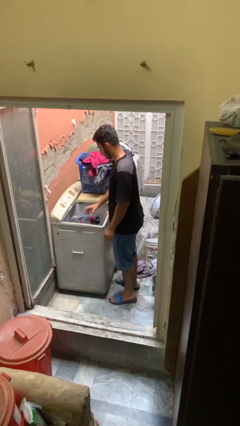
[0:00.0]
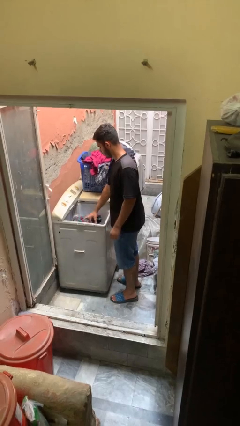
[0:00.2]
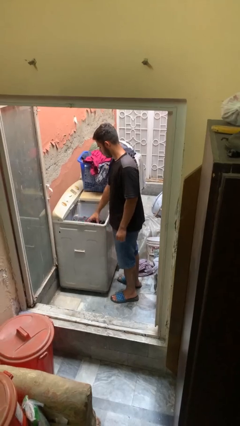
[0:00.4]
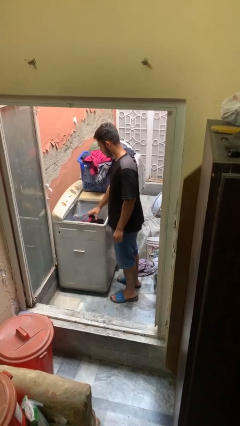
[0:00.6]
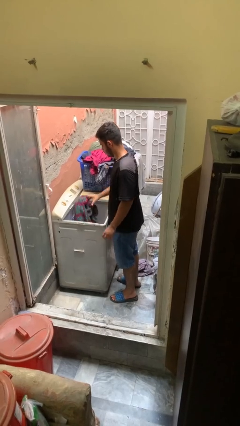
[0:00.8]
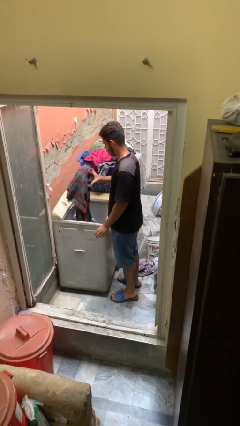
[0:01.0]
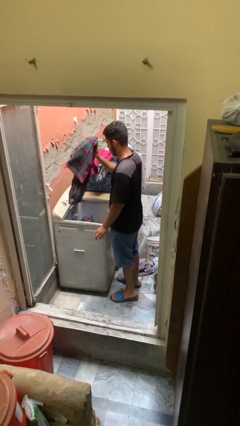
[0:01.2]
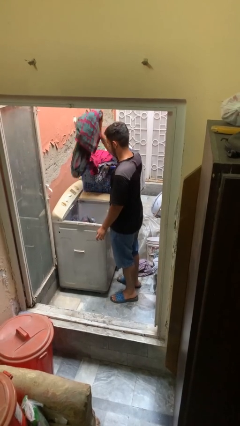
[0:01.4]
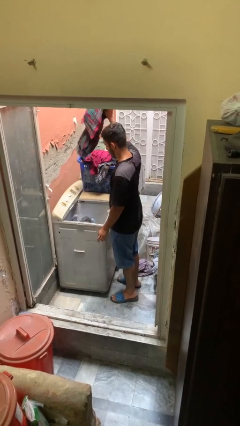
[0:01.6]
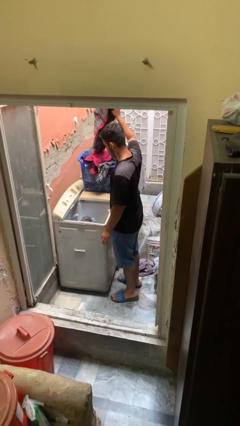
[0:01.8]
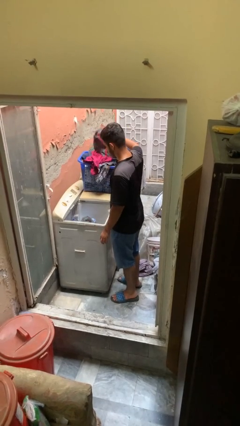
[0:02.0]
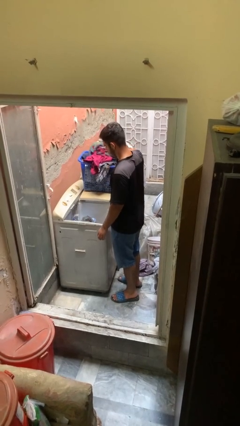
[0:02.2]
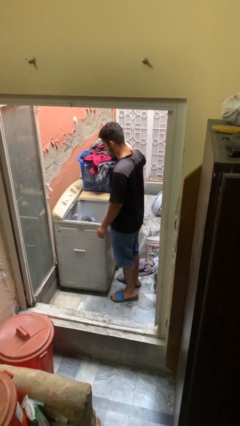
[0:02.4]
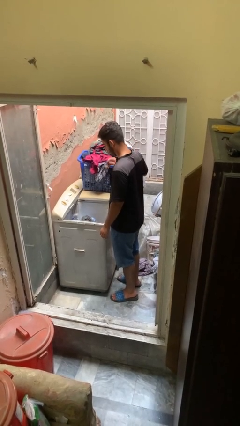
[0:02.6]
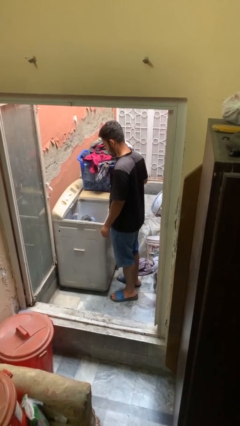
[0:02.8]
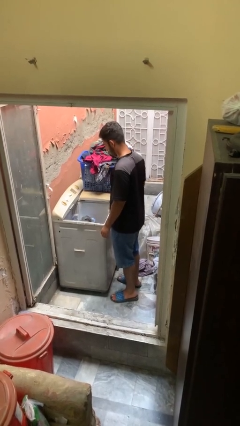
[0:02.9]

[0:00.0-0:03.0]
person loads clotheswasher

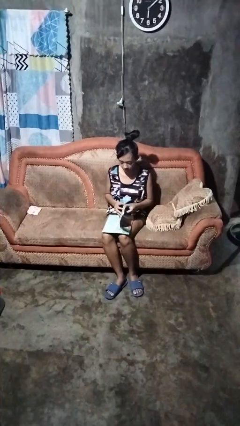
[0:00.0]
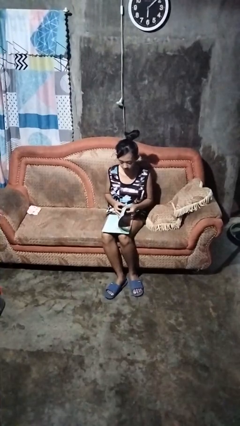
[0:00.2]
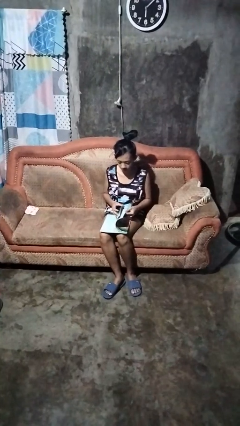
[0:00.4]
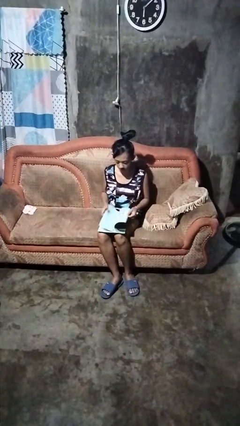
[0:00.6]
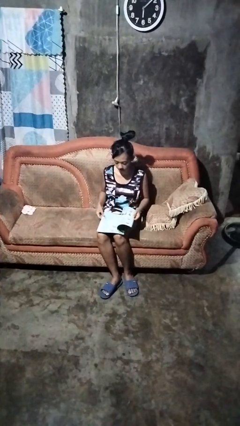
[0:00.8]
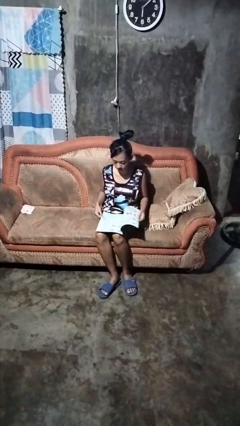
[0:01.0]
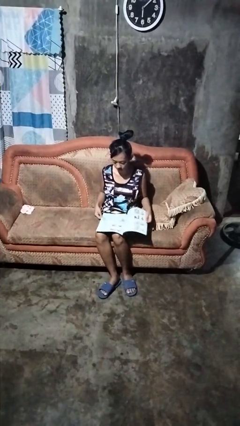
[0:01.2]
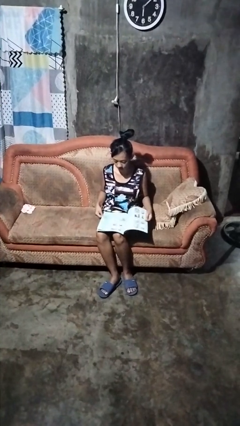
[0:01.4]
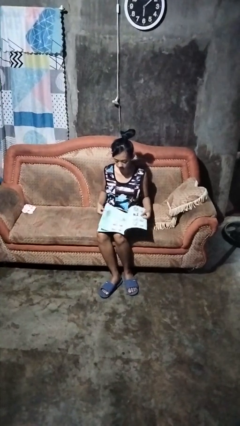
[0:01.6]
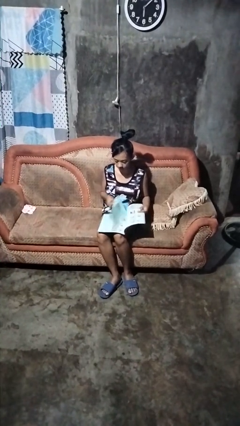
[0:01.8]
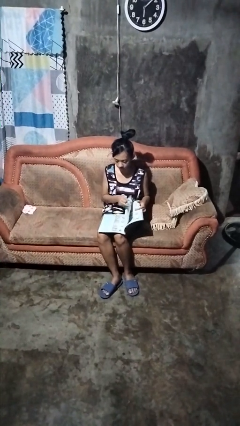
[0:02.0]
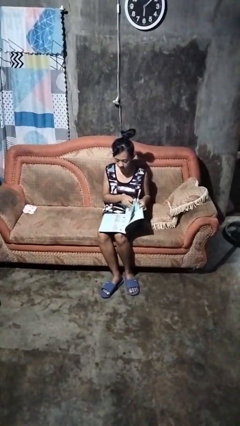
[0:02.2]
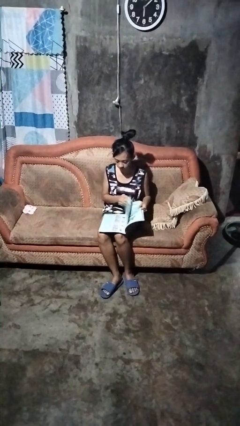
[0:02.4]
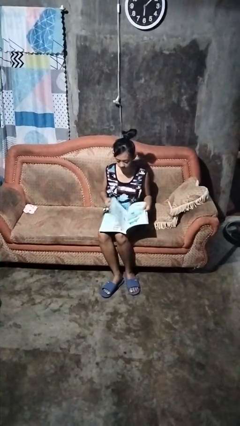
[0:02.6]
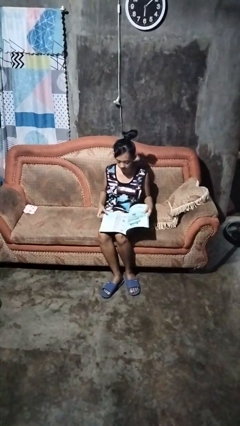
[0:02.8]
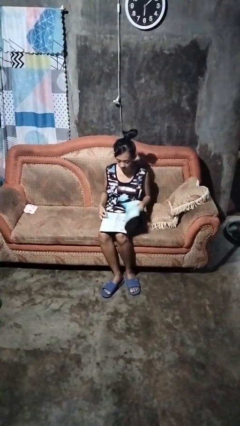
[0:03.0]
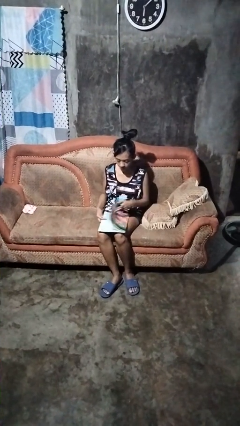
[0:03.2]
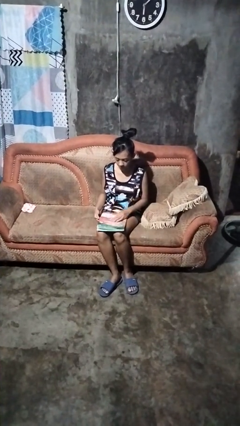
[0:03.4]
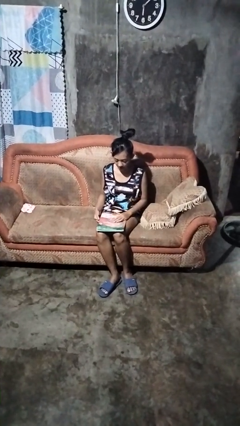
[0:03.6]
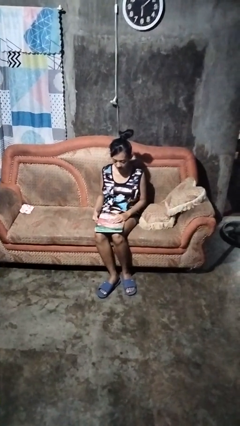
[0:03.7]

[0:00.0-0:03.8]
person reads magazine

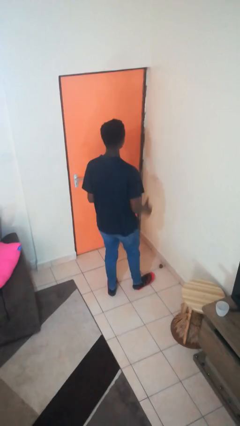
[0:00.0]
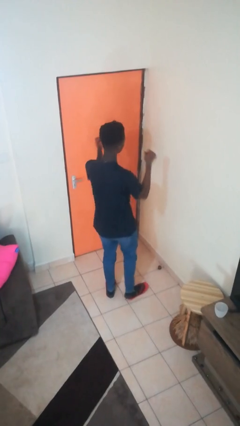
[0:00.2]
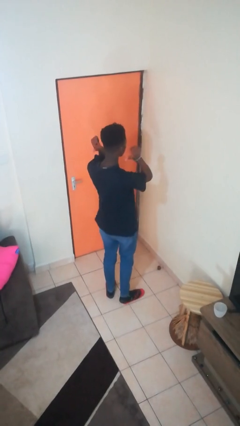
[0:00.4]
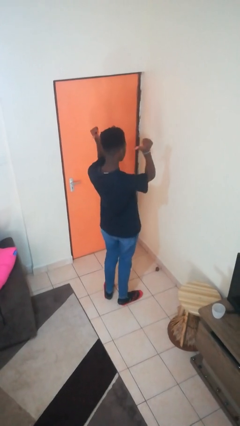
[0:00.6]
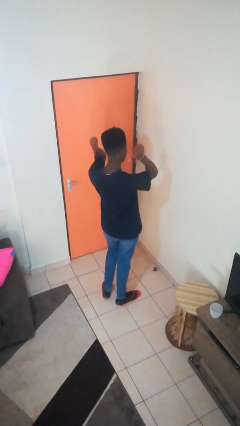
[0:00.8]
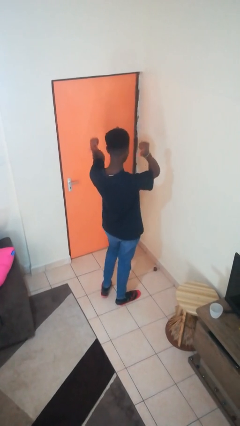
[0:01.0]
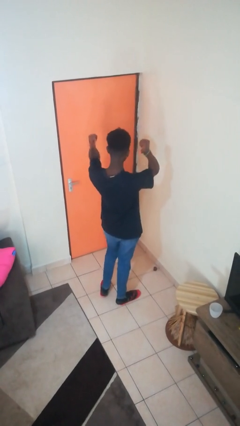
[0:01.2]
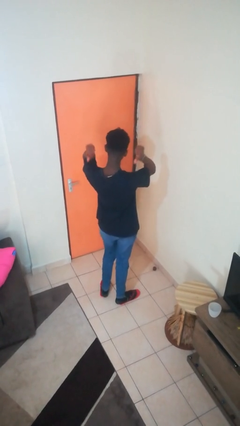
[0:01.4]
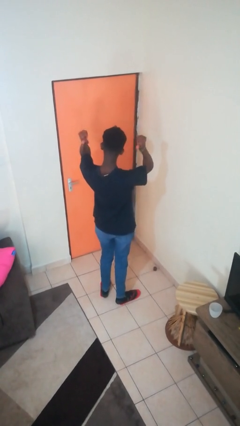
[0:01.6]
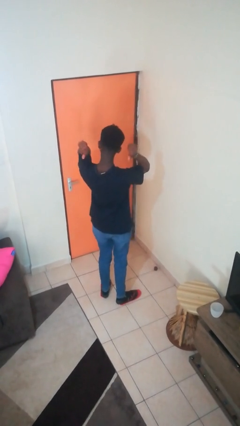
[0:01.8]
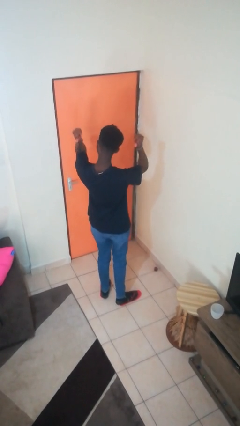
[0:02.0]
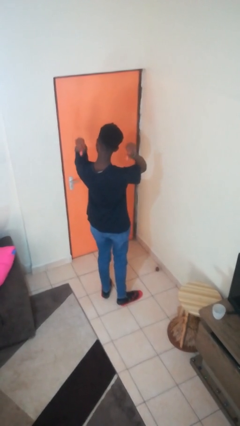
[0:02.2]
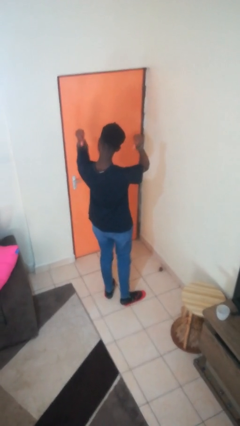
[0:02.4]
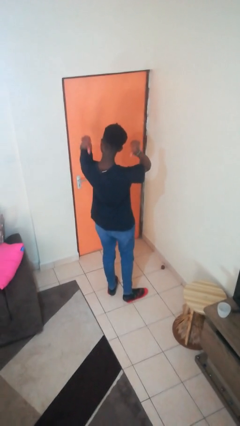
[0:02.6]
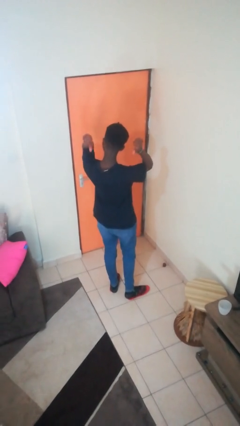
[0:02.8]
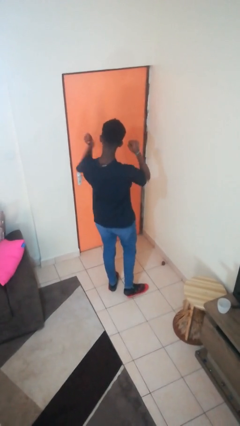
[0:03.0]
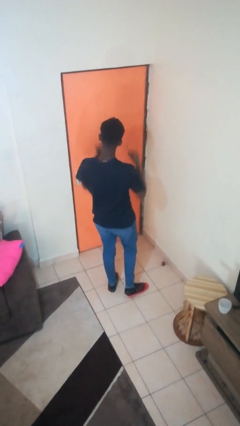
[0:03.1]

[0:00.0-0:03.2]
person gestures behind me

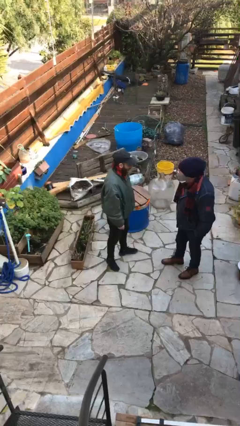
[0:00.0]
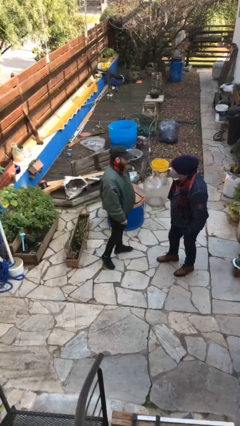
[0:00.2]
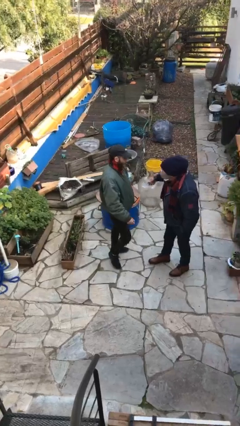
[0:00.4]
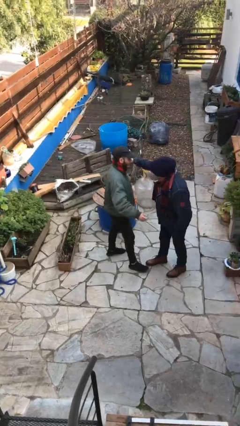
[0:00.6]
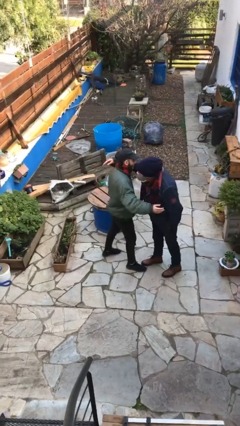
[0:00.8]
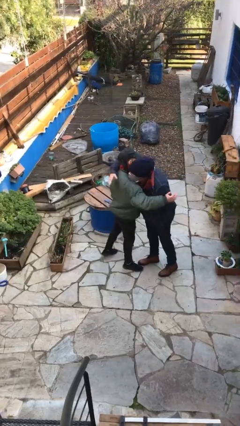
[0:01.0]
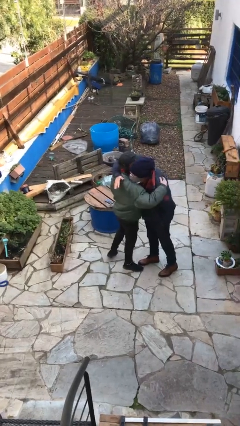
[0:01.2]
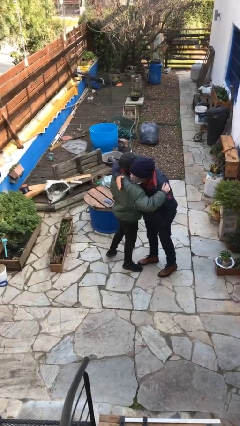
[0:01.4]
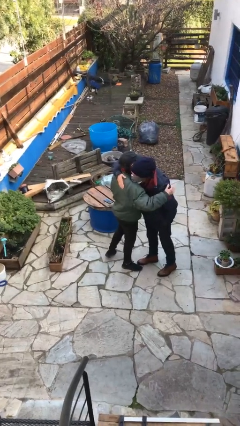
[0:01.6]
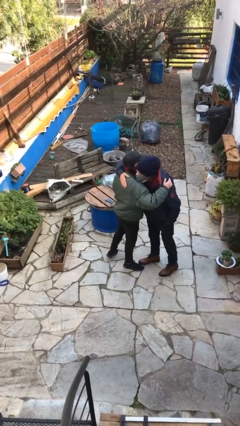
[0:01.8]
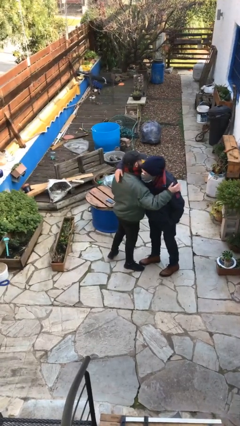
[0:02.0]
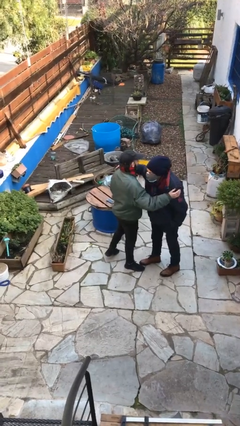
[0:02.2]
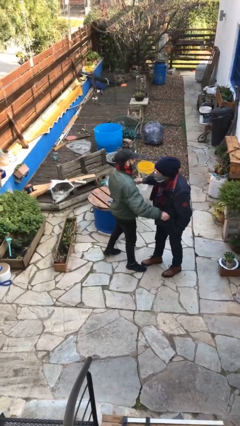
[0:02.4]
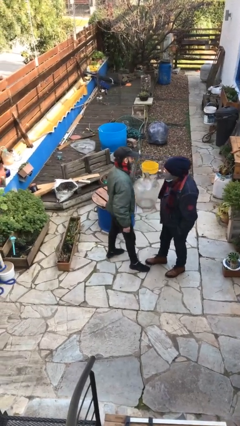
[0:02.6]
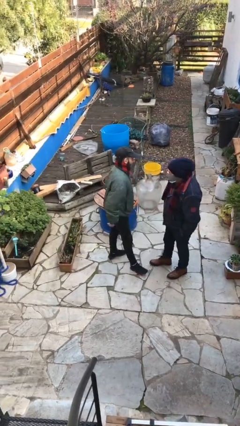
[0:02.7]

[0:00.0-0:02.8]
person kisses cheek of person

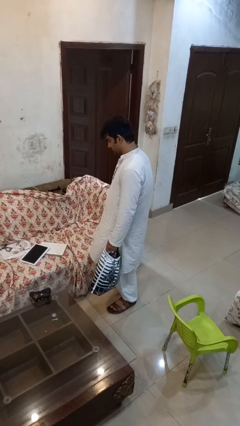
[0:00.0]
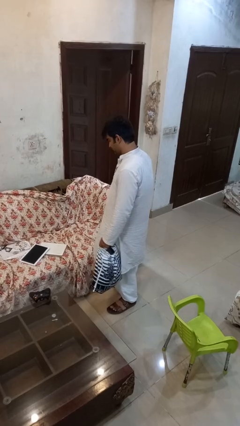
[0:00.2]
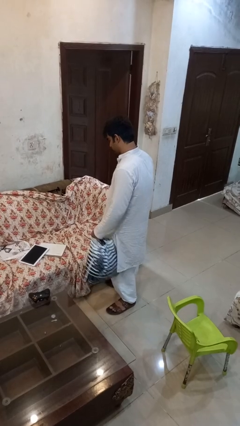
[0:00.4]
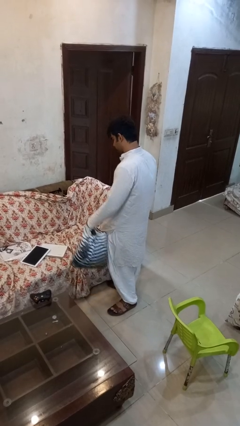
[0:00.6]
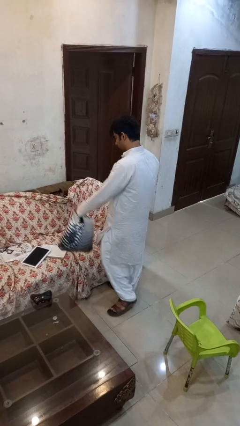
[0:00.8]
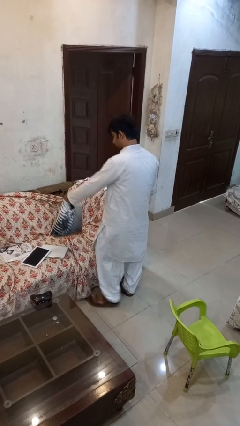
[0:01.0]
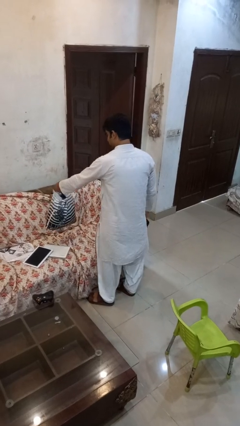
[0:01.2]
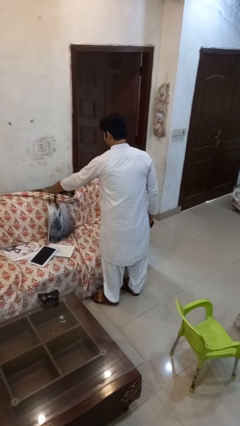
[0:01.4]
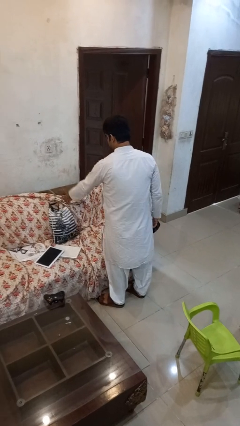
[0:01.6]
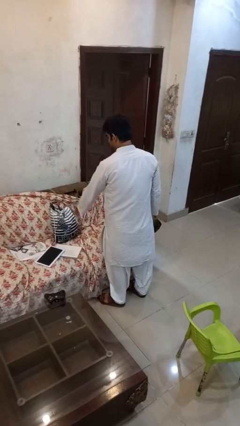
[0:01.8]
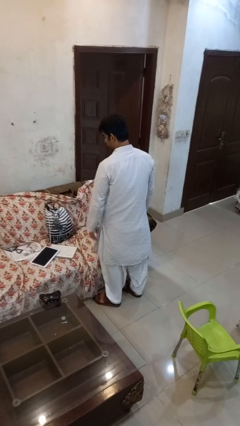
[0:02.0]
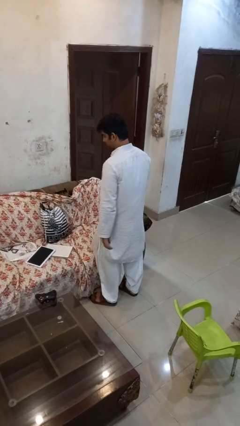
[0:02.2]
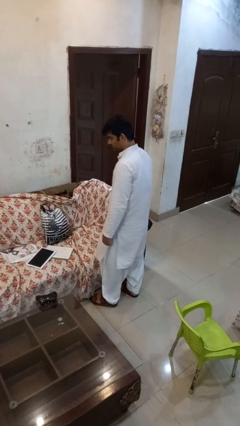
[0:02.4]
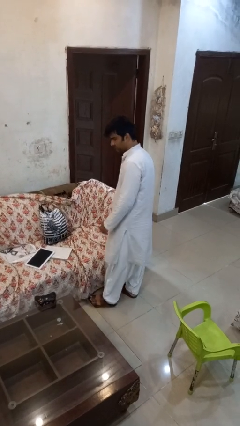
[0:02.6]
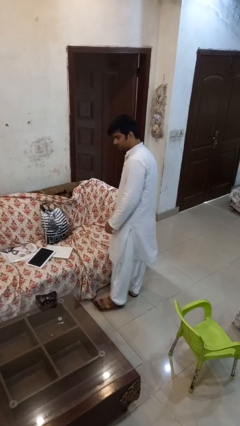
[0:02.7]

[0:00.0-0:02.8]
person puts down object on couch

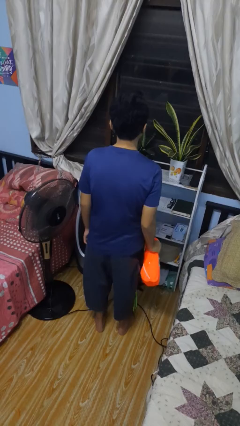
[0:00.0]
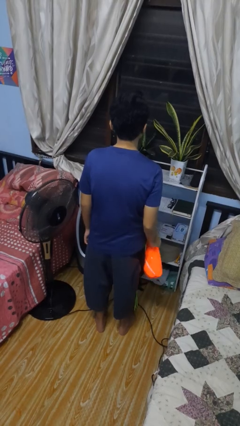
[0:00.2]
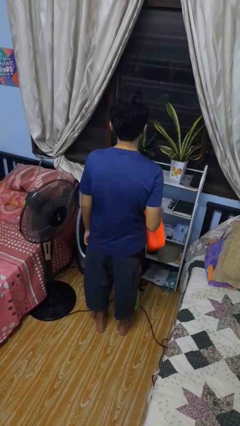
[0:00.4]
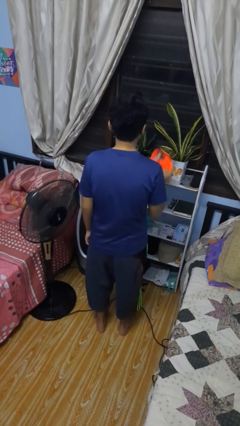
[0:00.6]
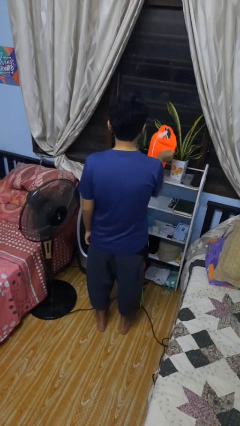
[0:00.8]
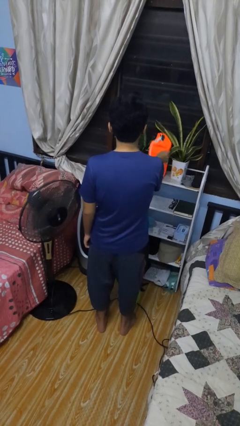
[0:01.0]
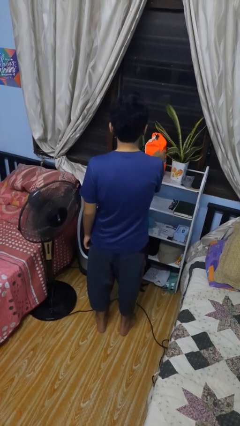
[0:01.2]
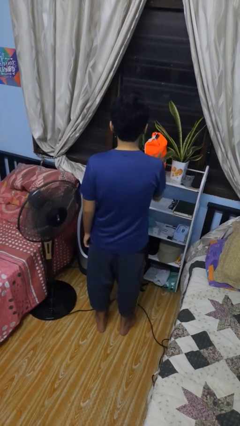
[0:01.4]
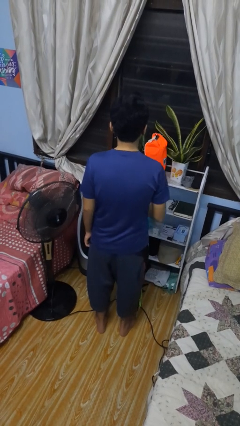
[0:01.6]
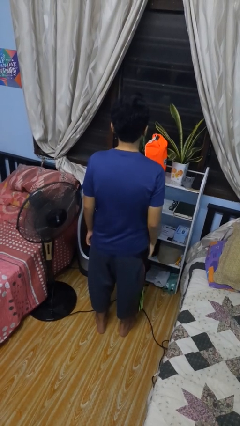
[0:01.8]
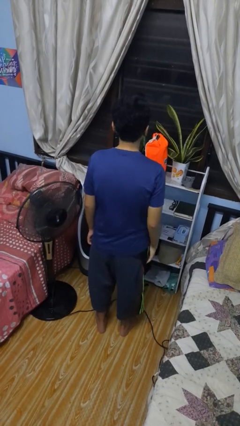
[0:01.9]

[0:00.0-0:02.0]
person puts down object on countertop
